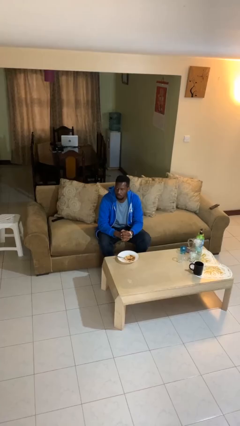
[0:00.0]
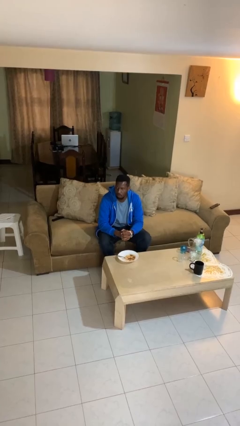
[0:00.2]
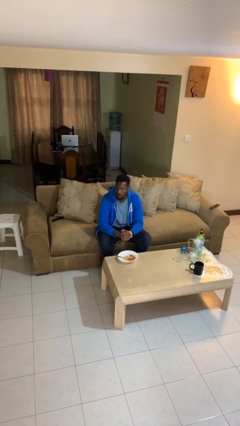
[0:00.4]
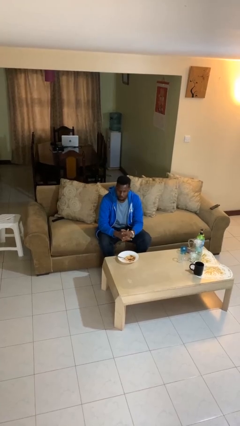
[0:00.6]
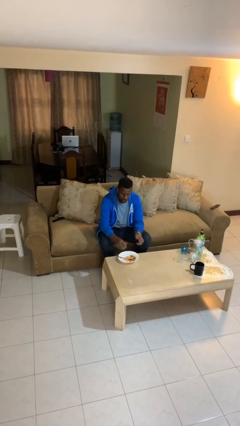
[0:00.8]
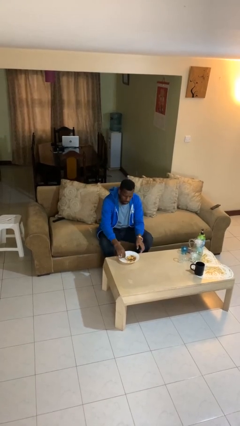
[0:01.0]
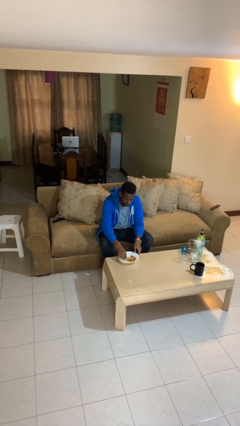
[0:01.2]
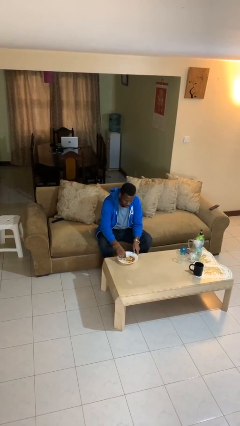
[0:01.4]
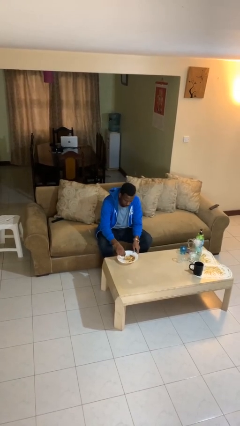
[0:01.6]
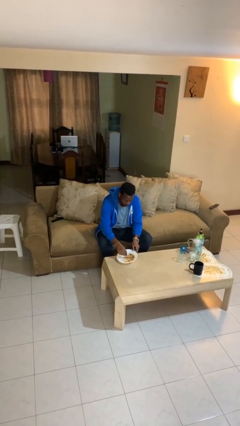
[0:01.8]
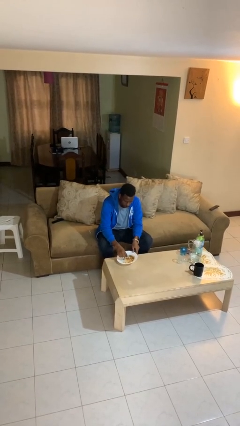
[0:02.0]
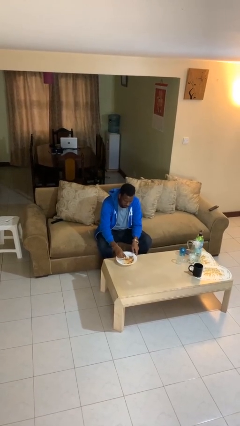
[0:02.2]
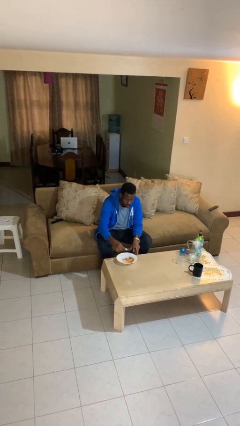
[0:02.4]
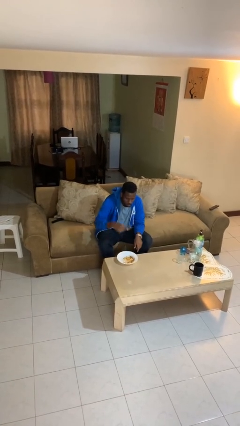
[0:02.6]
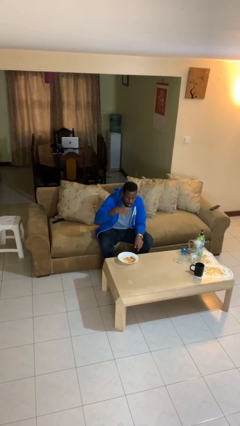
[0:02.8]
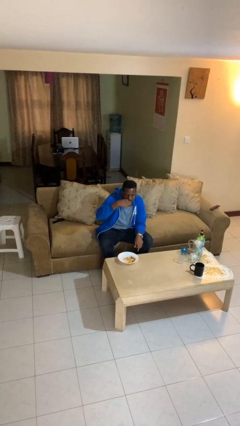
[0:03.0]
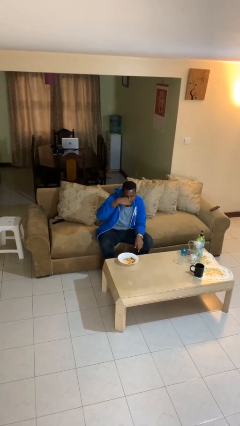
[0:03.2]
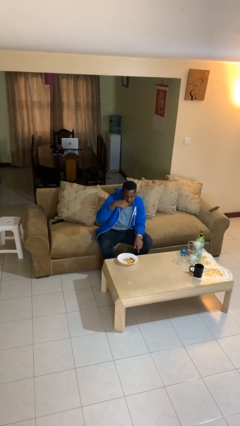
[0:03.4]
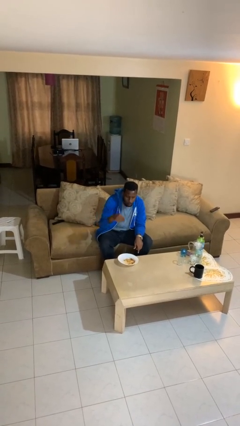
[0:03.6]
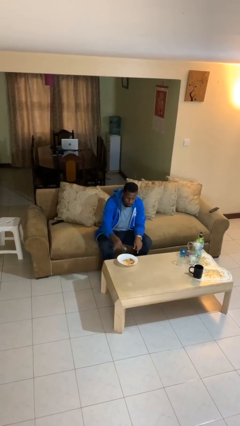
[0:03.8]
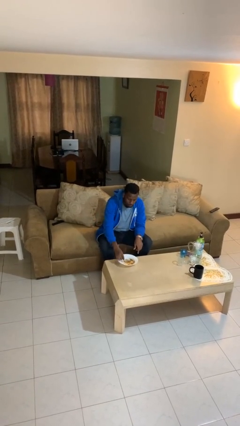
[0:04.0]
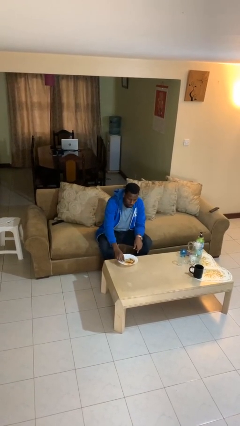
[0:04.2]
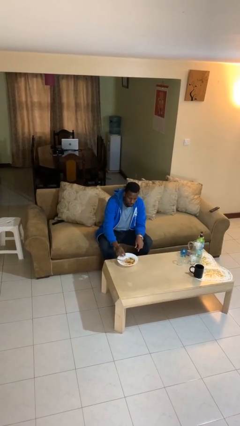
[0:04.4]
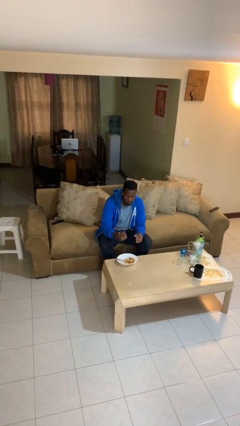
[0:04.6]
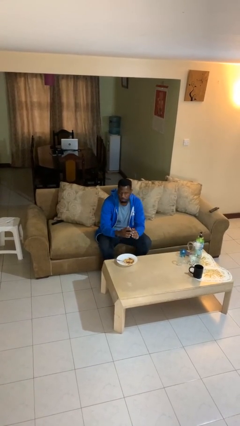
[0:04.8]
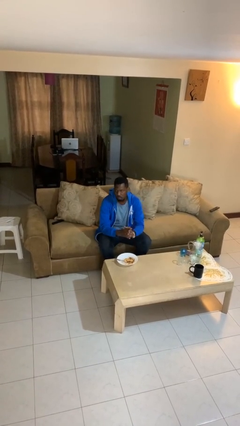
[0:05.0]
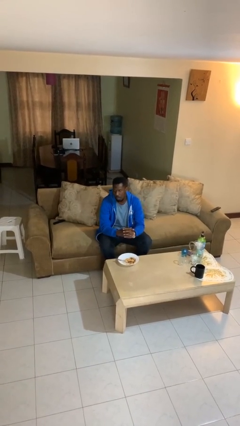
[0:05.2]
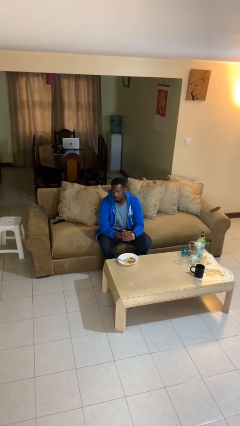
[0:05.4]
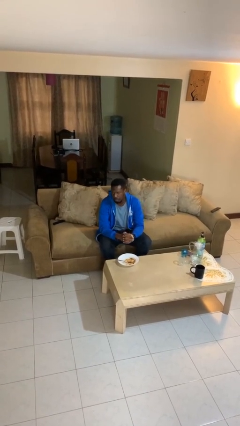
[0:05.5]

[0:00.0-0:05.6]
person eats with utensil

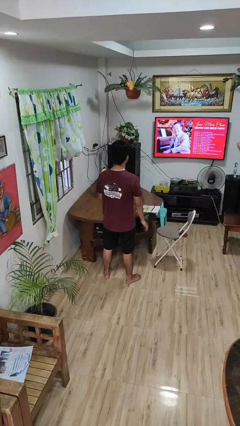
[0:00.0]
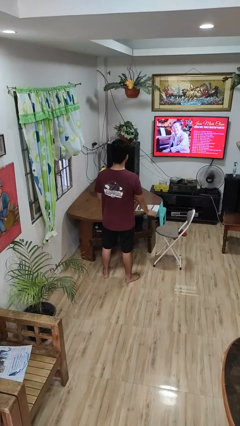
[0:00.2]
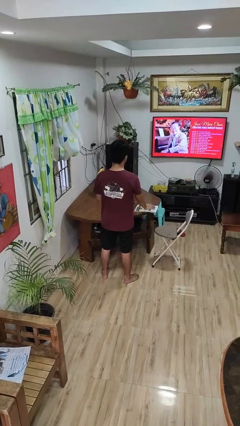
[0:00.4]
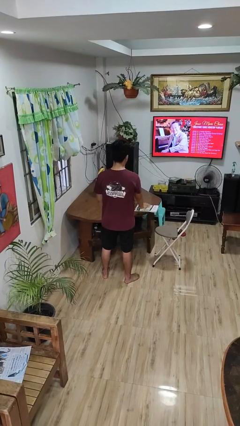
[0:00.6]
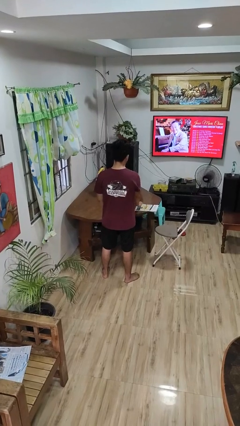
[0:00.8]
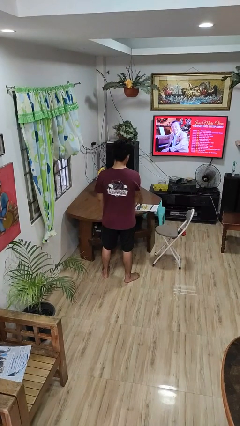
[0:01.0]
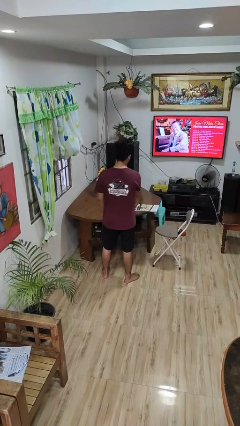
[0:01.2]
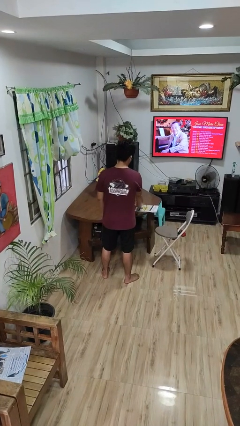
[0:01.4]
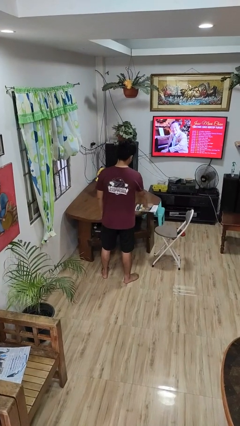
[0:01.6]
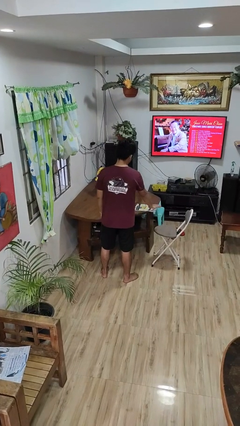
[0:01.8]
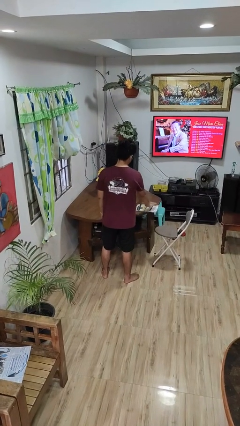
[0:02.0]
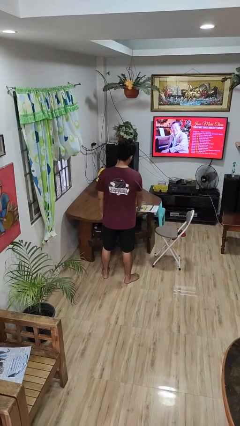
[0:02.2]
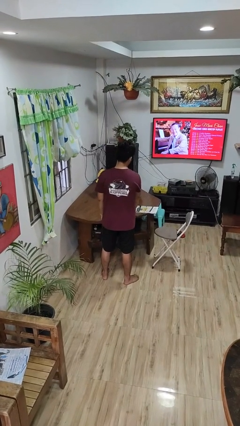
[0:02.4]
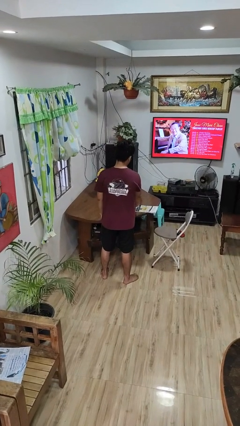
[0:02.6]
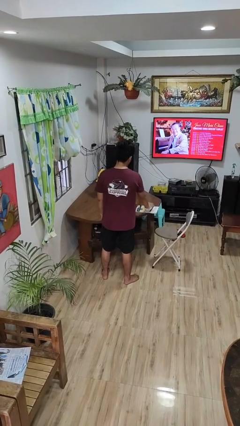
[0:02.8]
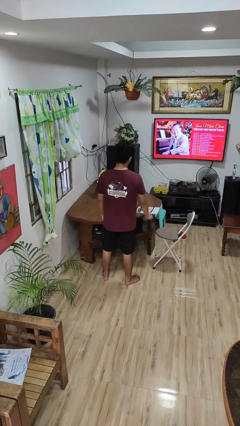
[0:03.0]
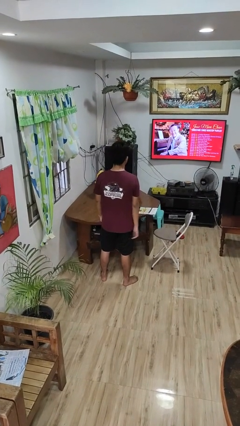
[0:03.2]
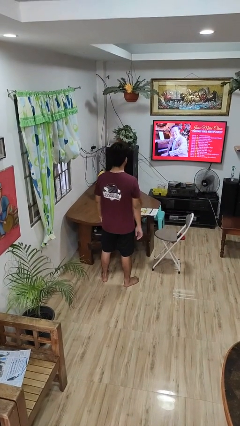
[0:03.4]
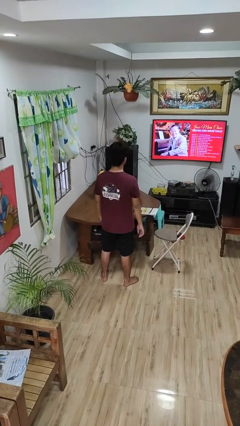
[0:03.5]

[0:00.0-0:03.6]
person waves hand over object

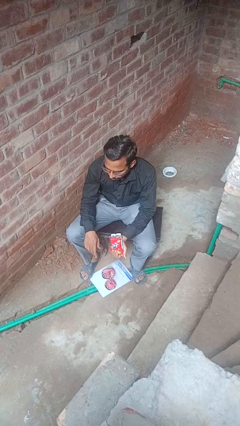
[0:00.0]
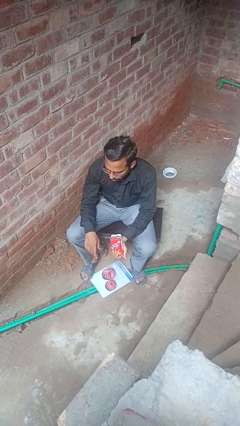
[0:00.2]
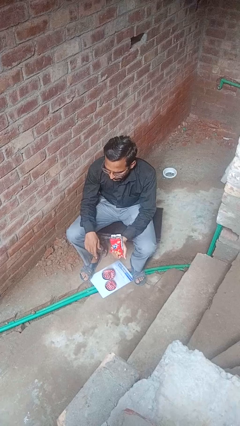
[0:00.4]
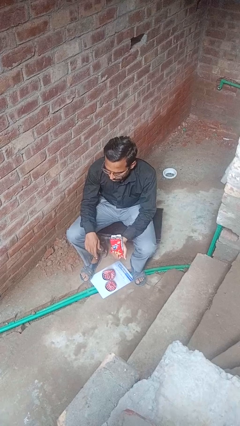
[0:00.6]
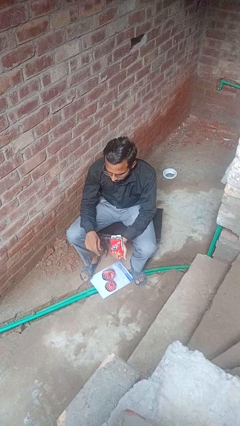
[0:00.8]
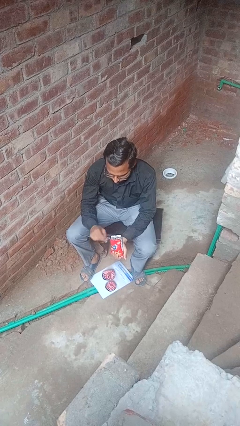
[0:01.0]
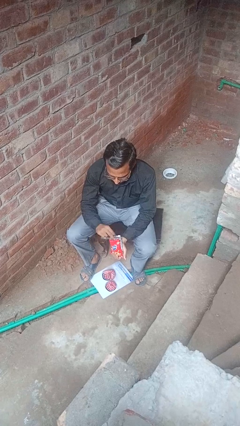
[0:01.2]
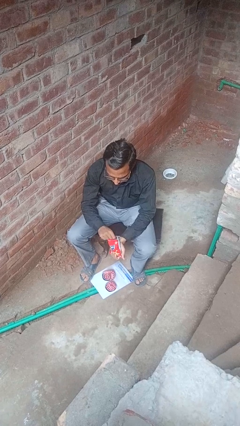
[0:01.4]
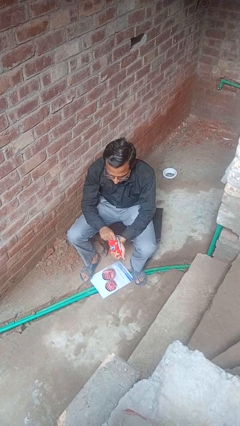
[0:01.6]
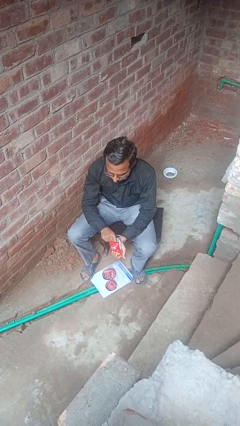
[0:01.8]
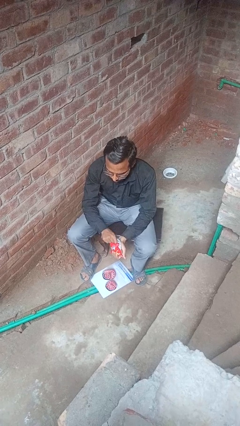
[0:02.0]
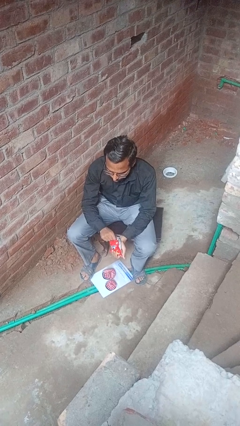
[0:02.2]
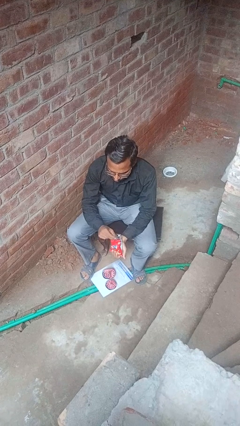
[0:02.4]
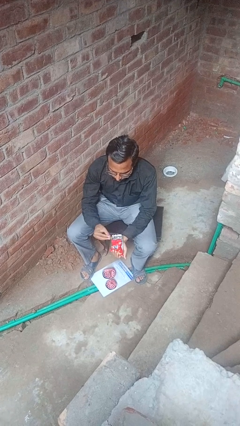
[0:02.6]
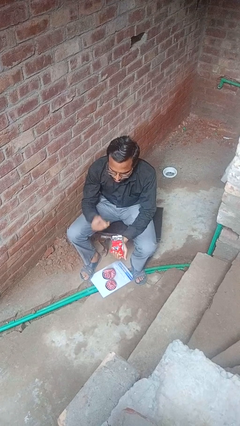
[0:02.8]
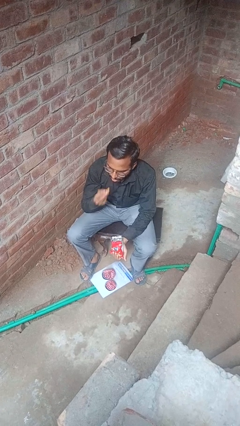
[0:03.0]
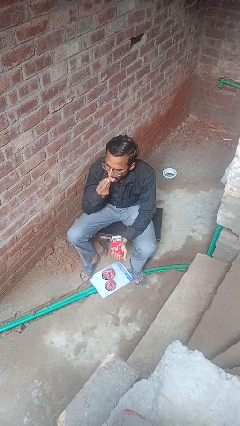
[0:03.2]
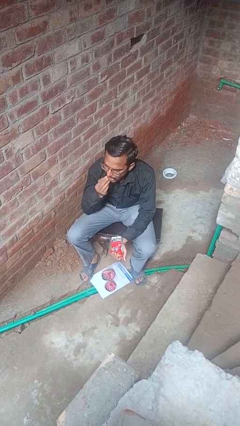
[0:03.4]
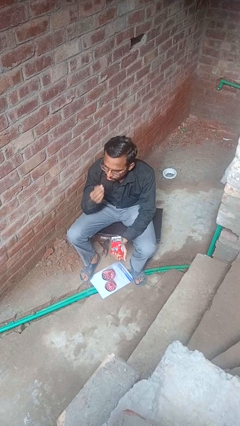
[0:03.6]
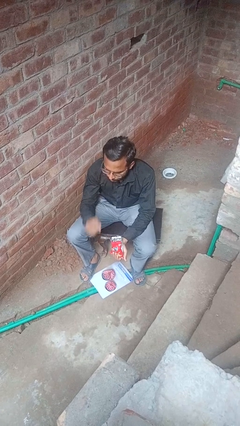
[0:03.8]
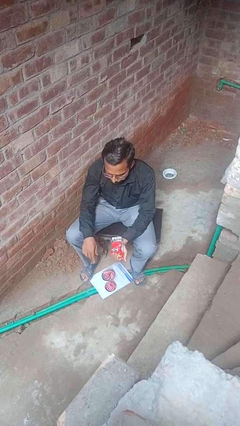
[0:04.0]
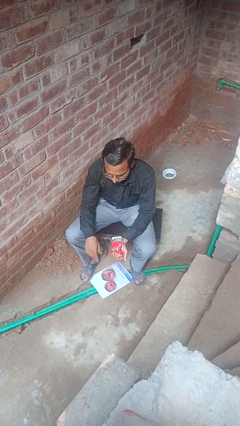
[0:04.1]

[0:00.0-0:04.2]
person eats snack from bag

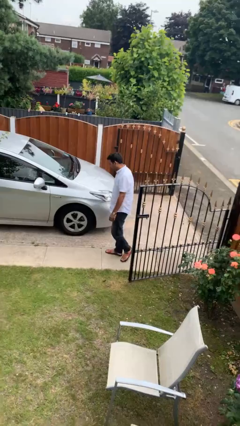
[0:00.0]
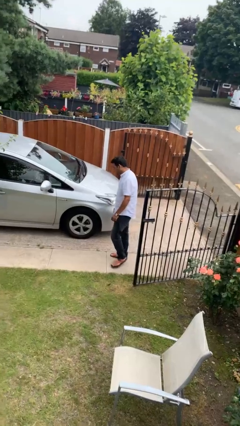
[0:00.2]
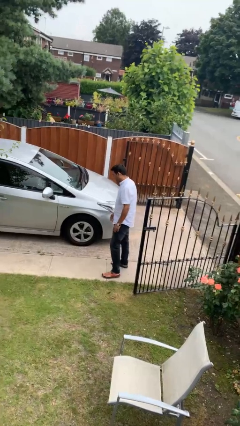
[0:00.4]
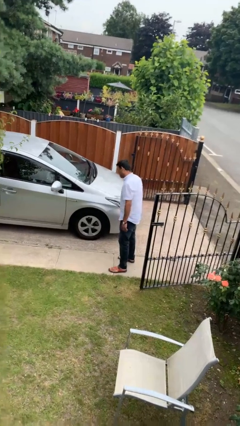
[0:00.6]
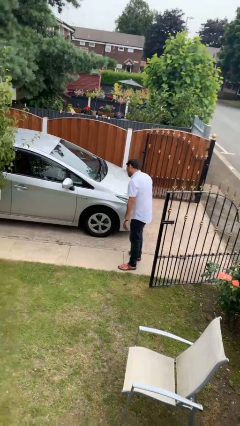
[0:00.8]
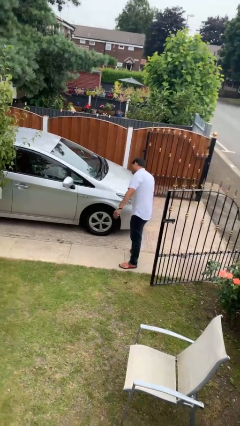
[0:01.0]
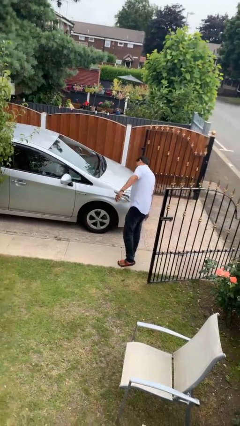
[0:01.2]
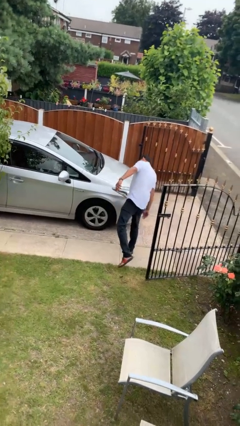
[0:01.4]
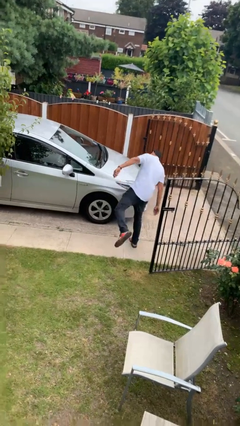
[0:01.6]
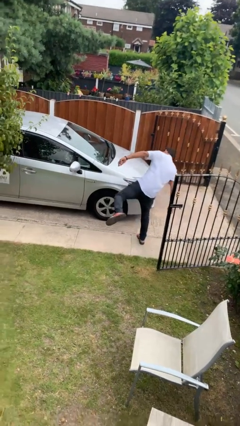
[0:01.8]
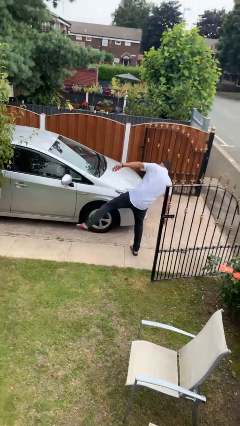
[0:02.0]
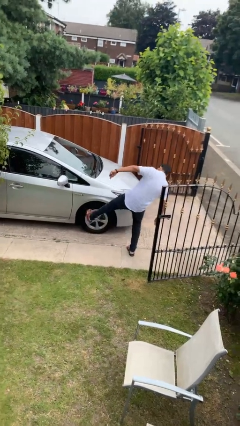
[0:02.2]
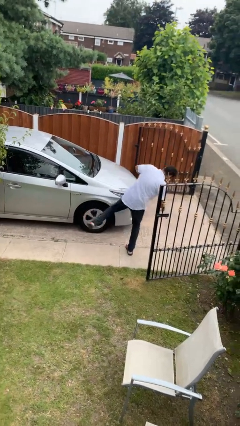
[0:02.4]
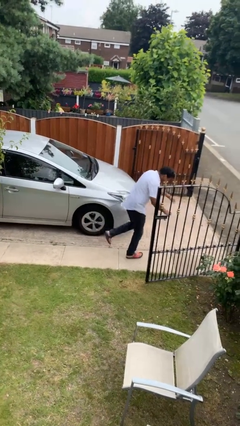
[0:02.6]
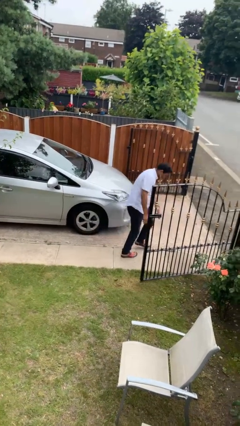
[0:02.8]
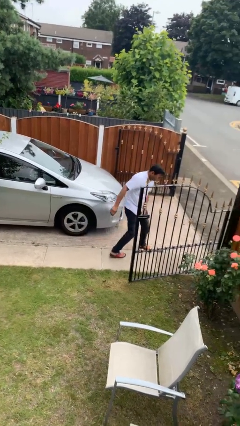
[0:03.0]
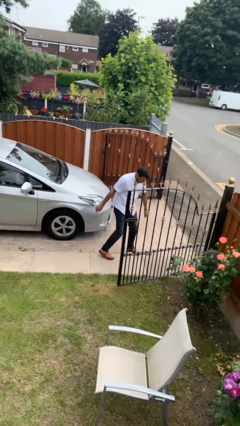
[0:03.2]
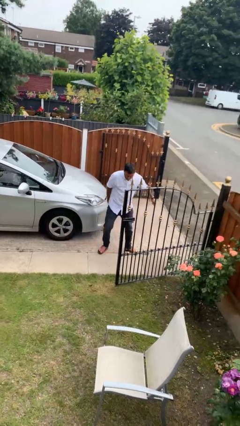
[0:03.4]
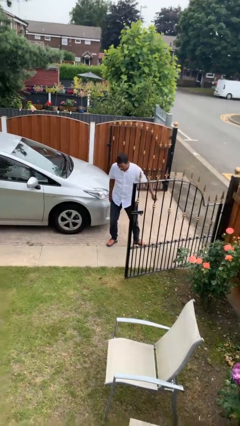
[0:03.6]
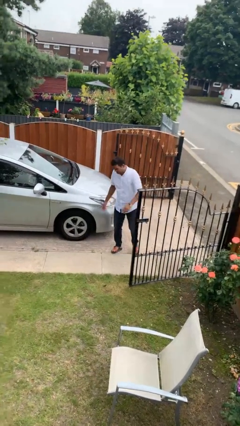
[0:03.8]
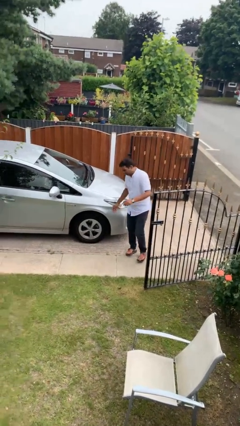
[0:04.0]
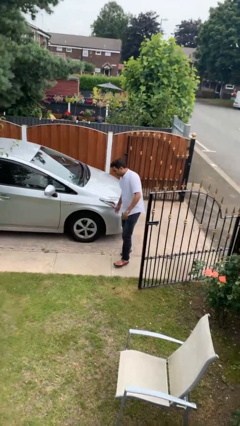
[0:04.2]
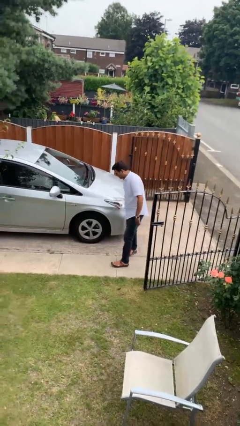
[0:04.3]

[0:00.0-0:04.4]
person kicks car tires
